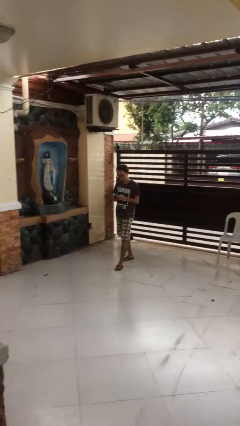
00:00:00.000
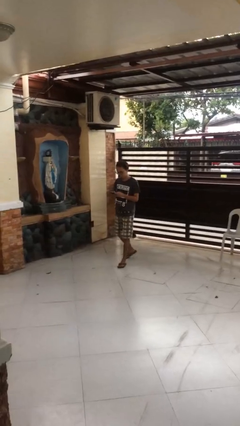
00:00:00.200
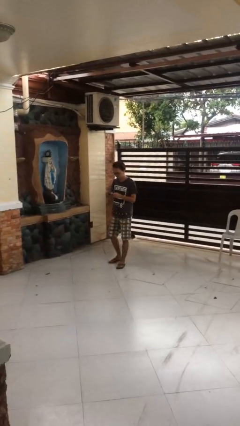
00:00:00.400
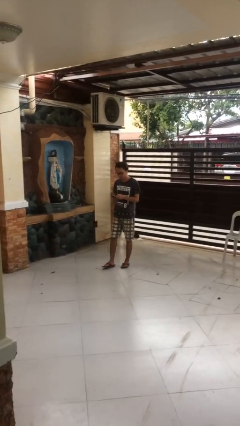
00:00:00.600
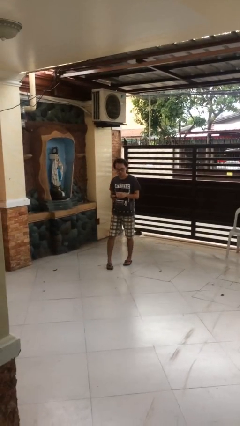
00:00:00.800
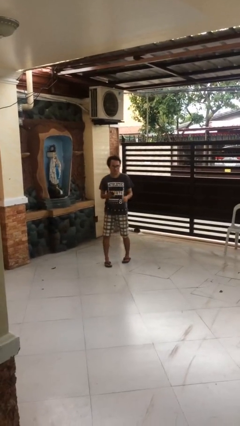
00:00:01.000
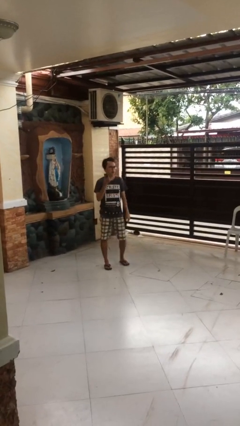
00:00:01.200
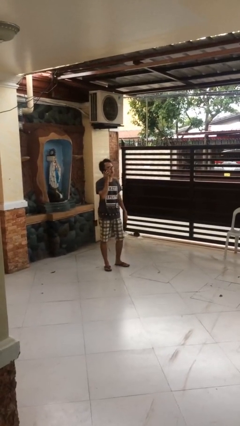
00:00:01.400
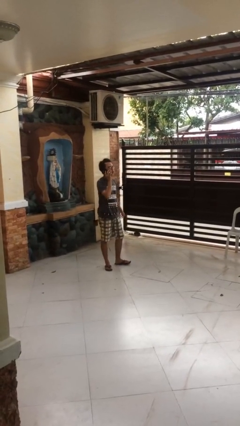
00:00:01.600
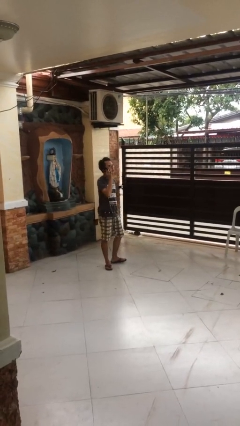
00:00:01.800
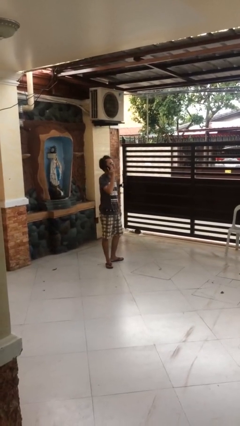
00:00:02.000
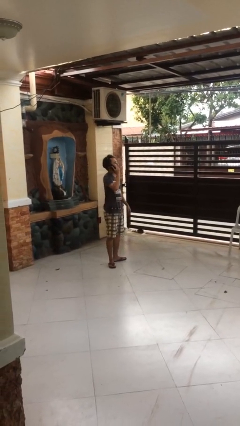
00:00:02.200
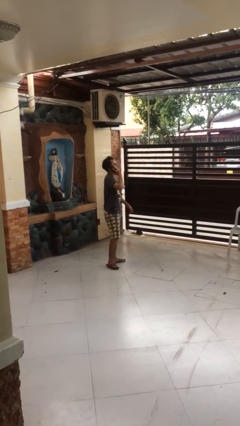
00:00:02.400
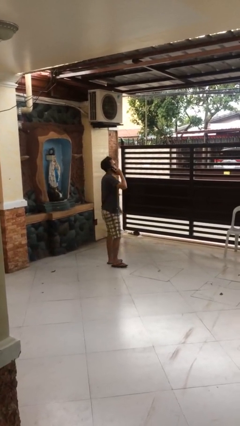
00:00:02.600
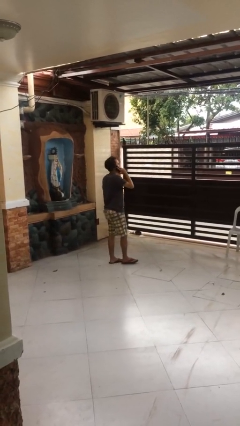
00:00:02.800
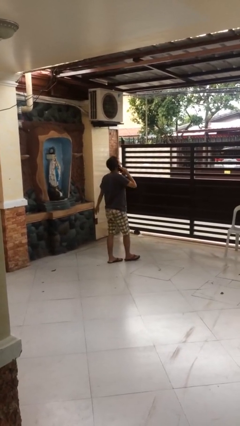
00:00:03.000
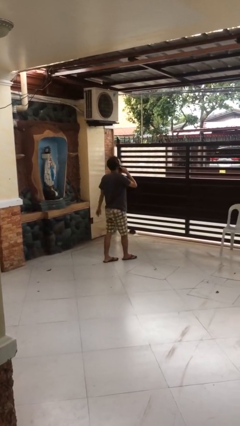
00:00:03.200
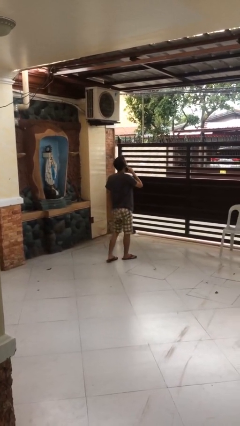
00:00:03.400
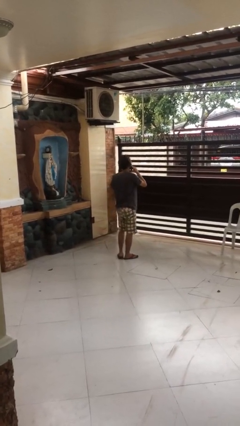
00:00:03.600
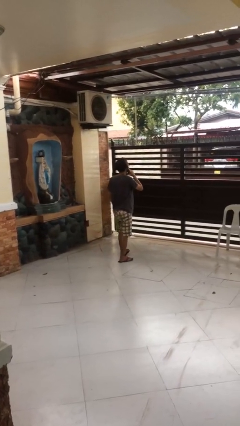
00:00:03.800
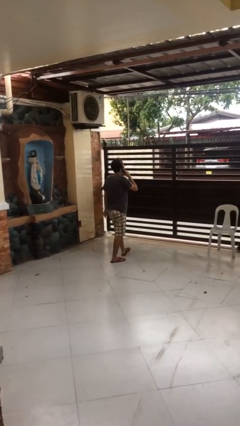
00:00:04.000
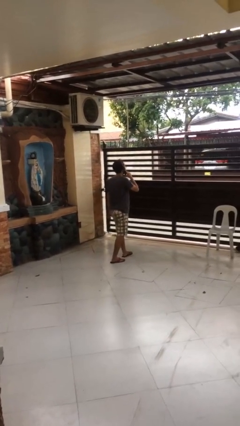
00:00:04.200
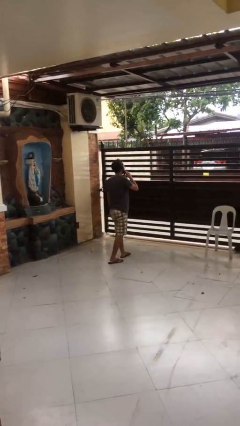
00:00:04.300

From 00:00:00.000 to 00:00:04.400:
person talks on phone

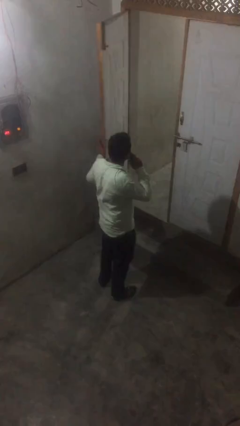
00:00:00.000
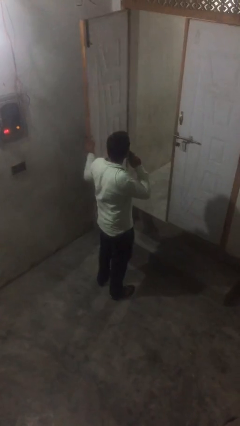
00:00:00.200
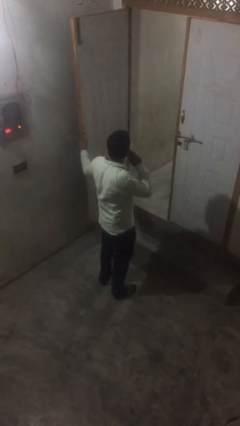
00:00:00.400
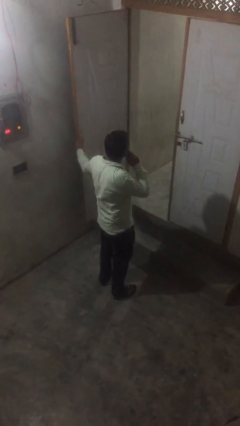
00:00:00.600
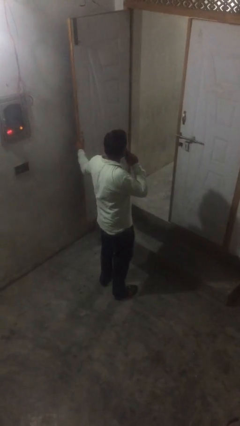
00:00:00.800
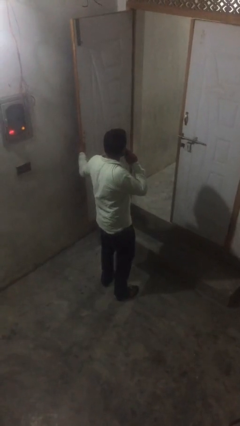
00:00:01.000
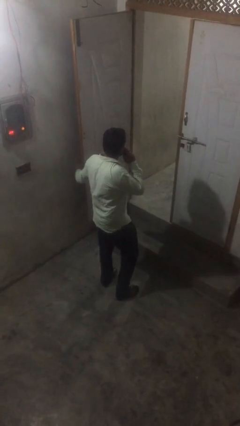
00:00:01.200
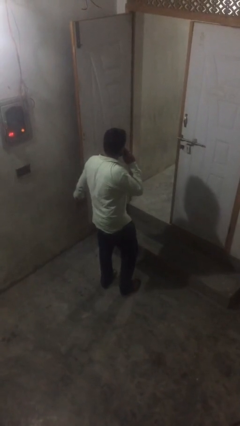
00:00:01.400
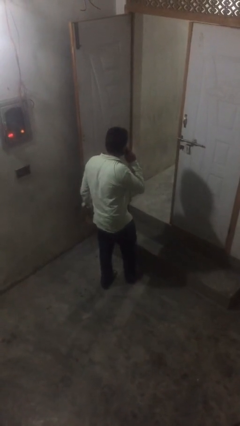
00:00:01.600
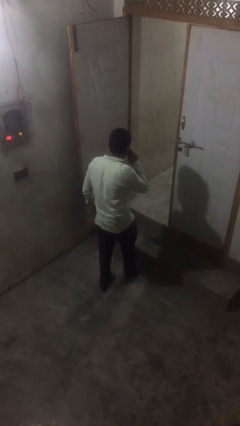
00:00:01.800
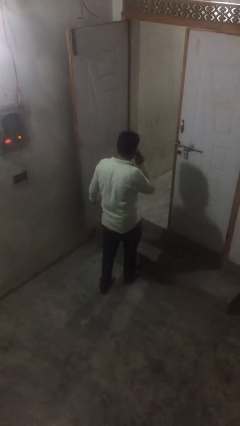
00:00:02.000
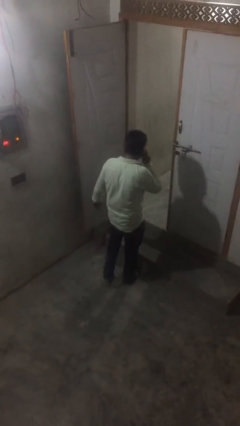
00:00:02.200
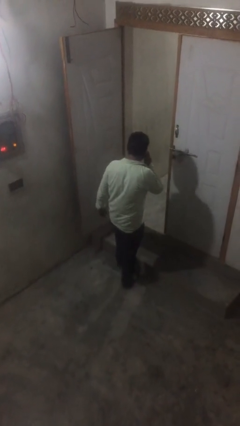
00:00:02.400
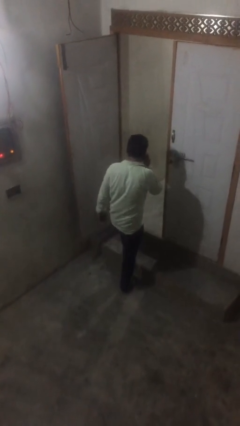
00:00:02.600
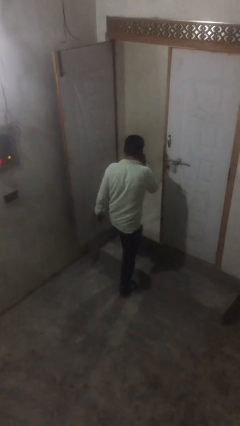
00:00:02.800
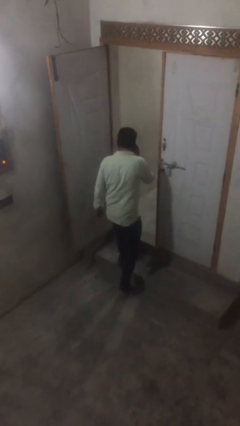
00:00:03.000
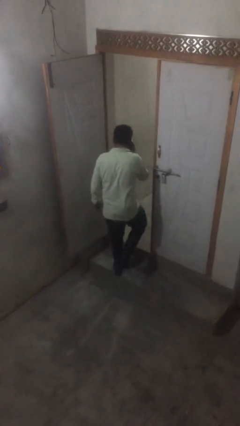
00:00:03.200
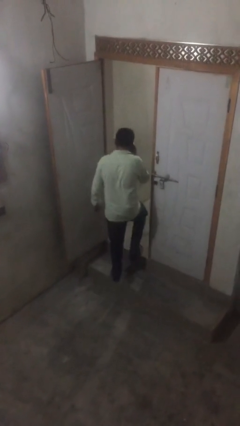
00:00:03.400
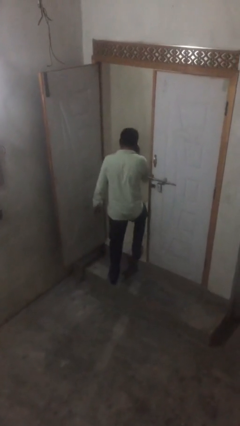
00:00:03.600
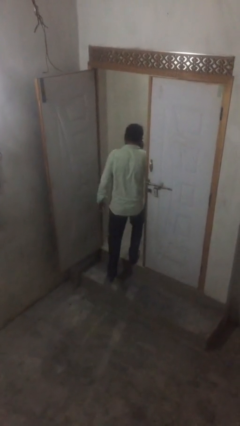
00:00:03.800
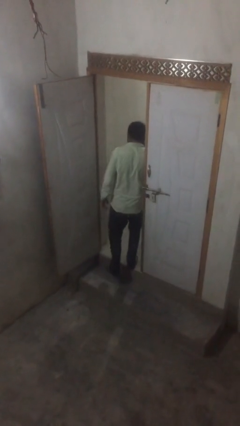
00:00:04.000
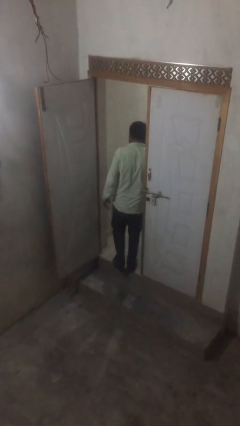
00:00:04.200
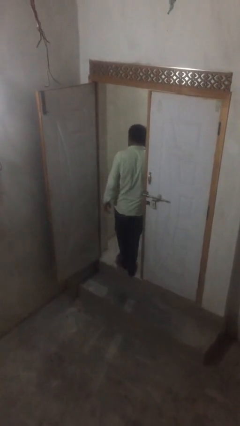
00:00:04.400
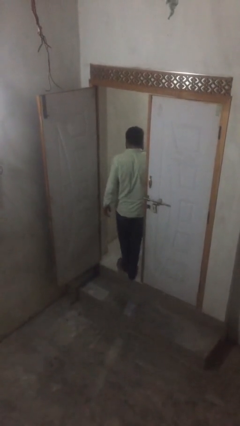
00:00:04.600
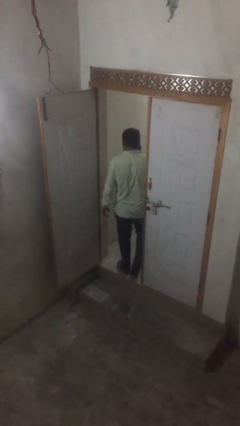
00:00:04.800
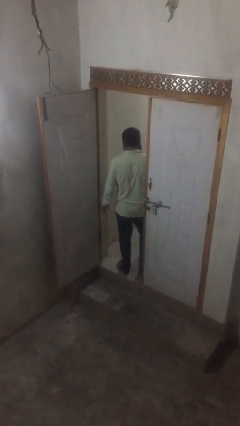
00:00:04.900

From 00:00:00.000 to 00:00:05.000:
person exits scene through structure

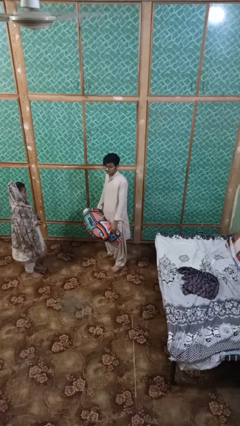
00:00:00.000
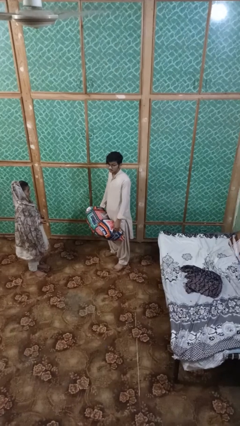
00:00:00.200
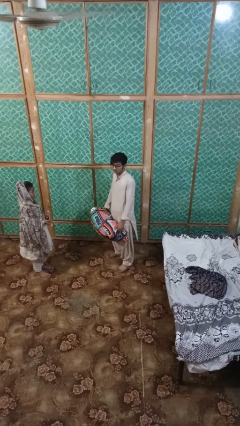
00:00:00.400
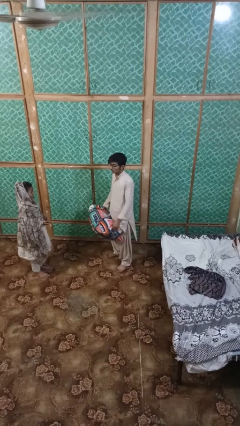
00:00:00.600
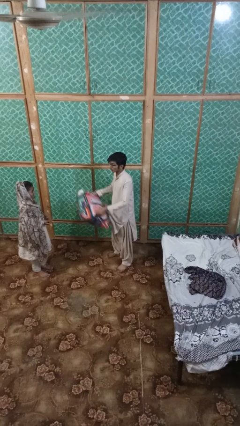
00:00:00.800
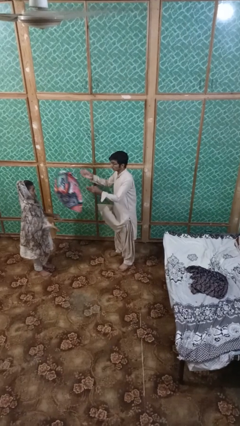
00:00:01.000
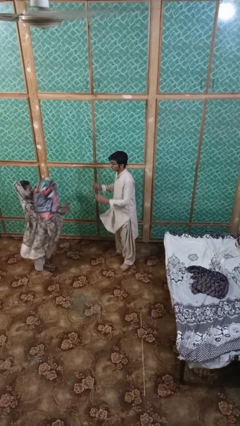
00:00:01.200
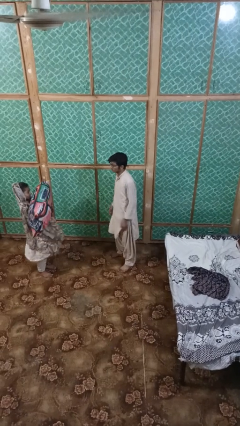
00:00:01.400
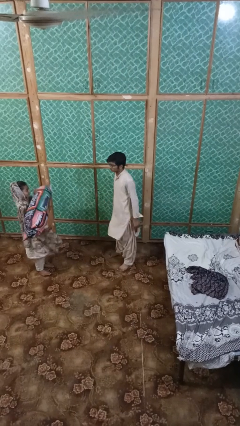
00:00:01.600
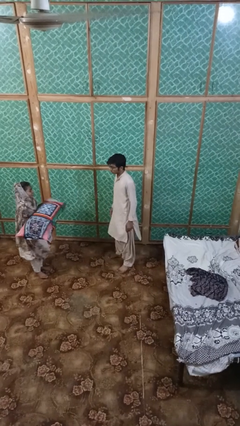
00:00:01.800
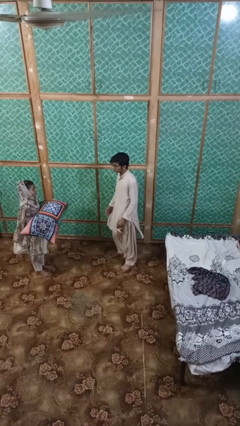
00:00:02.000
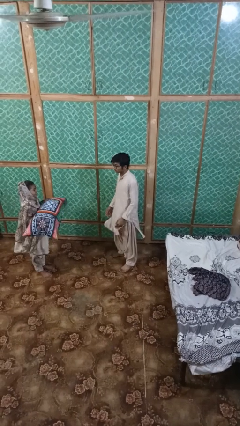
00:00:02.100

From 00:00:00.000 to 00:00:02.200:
person throws object to person

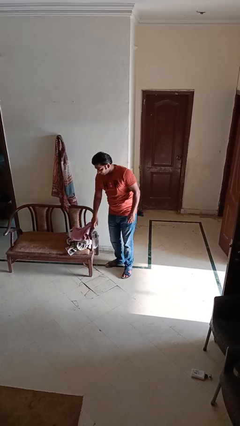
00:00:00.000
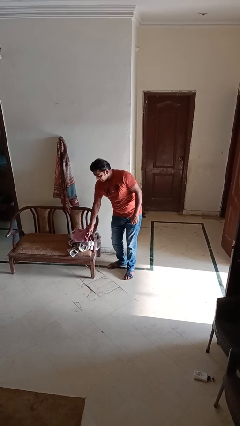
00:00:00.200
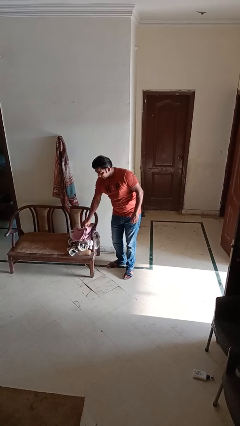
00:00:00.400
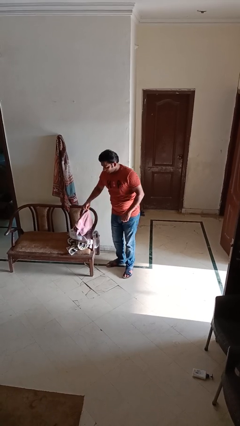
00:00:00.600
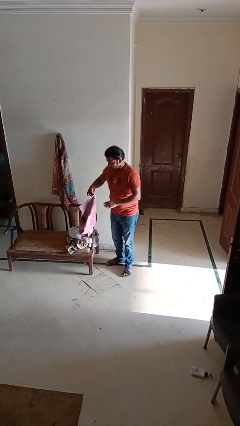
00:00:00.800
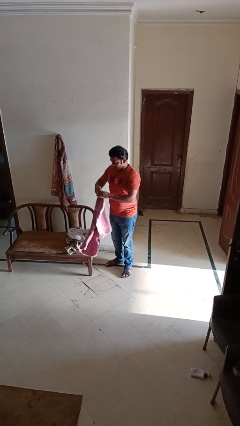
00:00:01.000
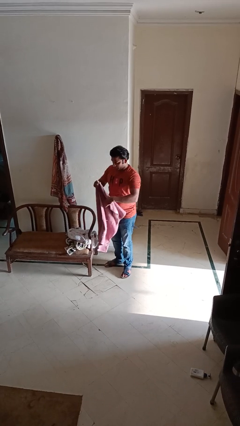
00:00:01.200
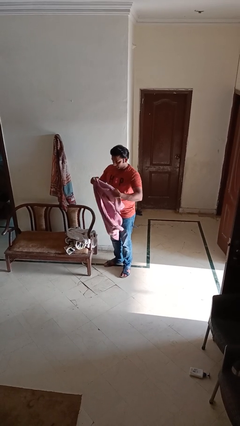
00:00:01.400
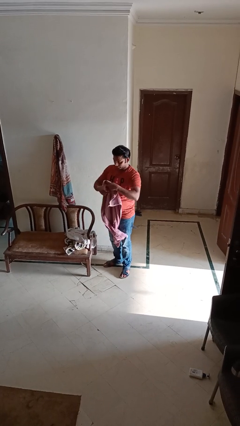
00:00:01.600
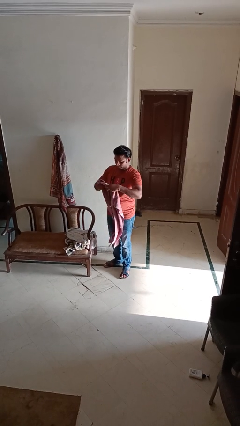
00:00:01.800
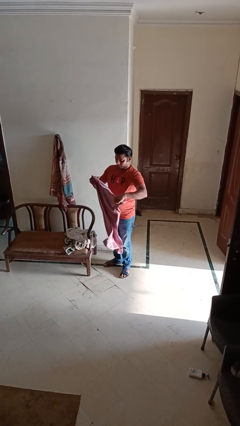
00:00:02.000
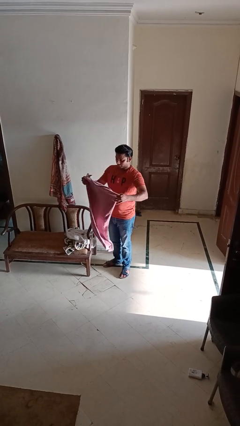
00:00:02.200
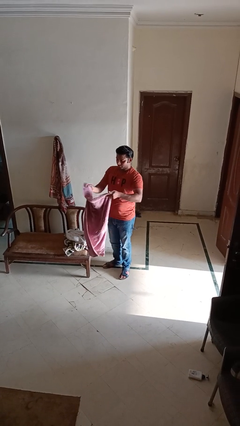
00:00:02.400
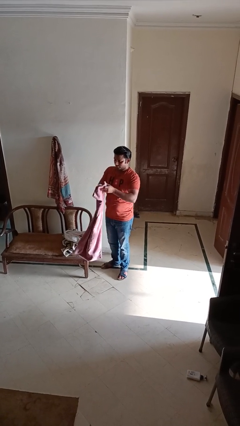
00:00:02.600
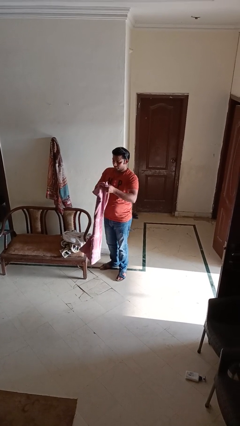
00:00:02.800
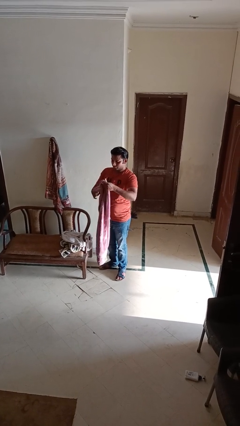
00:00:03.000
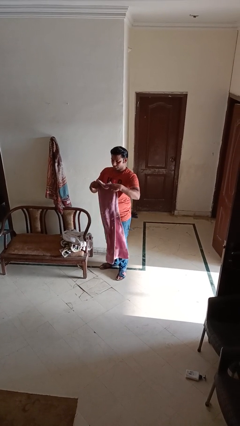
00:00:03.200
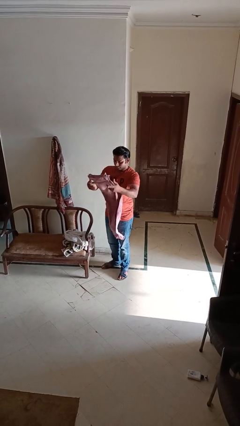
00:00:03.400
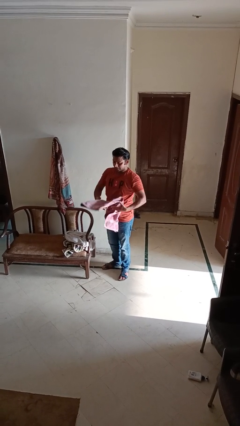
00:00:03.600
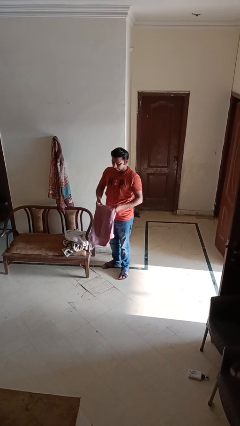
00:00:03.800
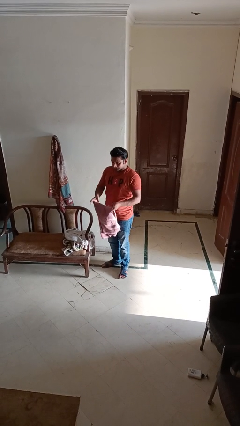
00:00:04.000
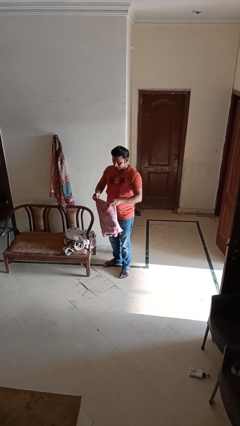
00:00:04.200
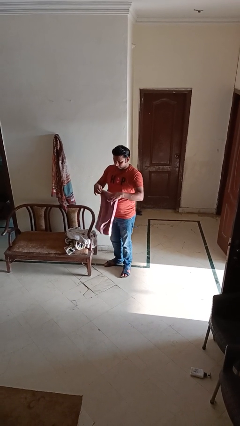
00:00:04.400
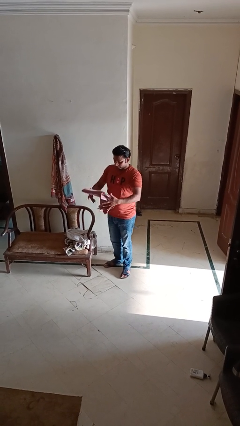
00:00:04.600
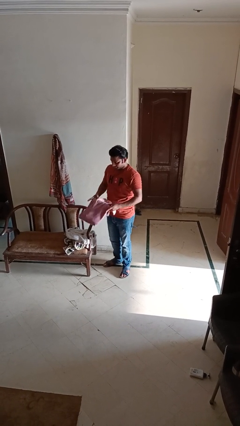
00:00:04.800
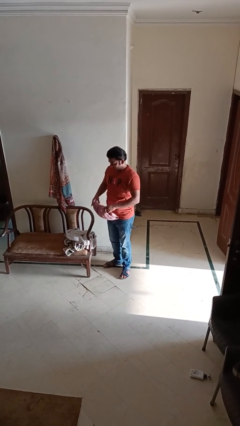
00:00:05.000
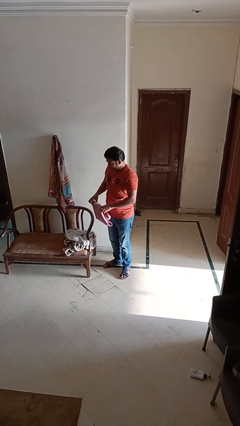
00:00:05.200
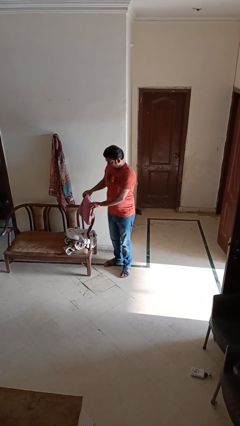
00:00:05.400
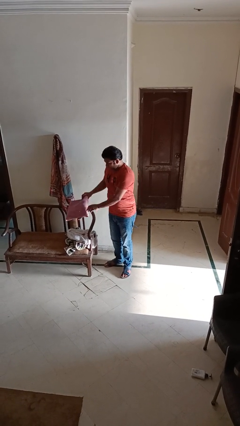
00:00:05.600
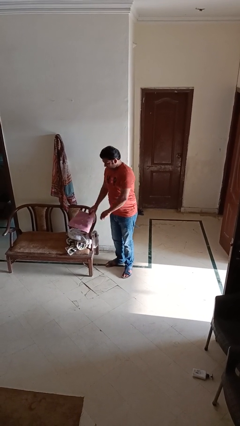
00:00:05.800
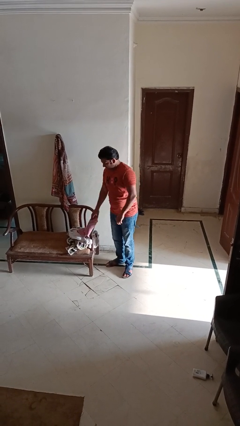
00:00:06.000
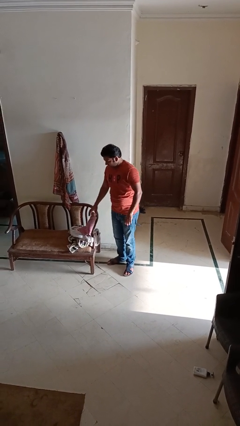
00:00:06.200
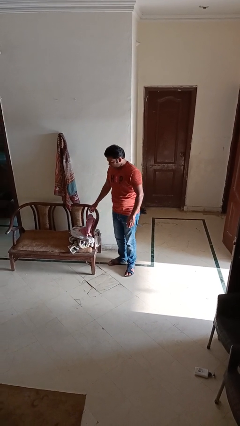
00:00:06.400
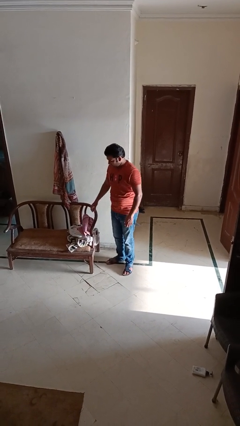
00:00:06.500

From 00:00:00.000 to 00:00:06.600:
person folds towel
